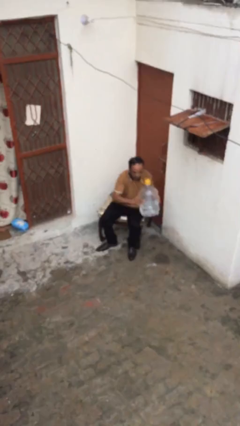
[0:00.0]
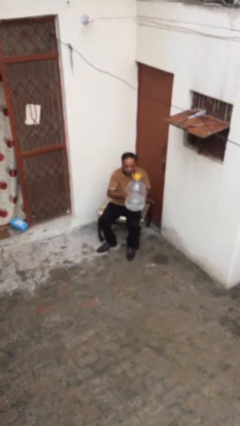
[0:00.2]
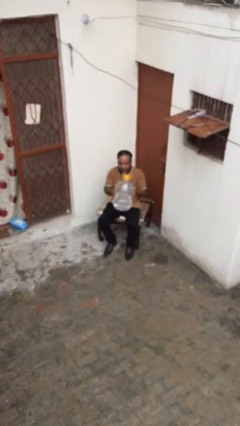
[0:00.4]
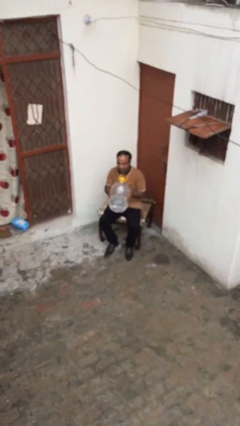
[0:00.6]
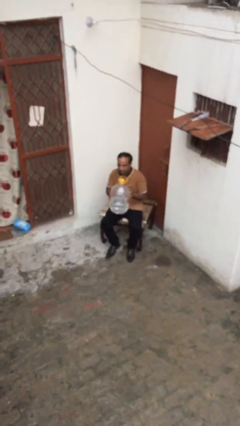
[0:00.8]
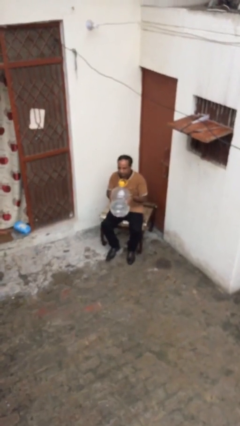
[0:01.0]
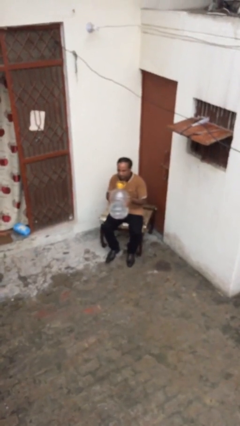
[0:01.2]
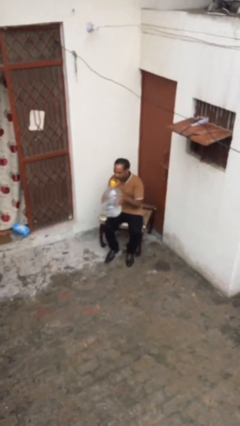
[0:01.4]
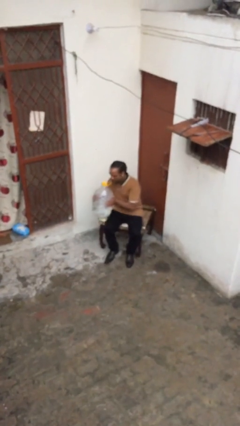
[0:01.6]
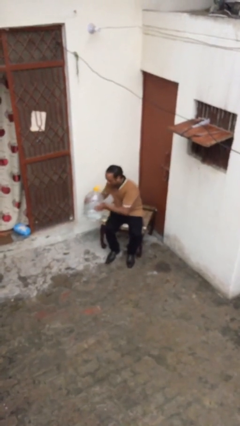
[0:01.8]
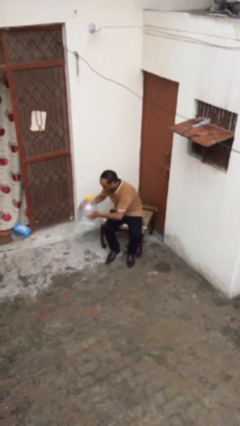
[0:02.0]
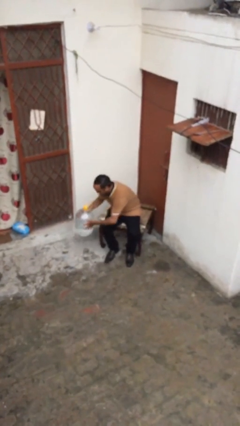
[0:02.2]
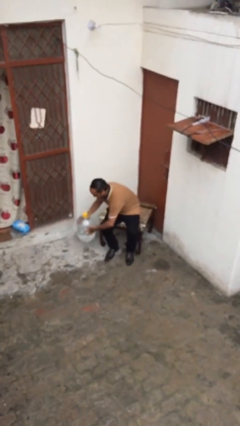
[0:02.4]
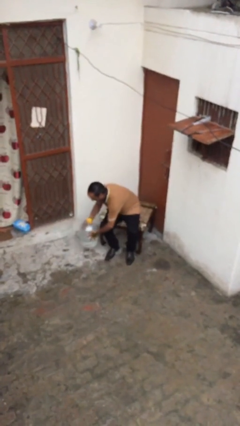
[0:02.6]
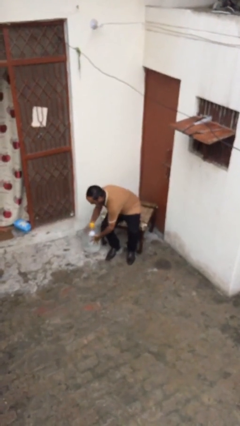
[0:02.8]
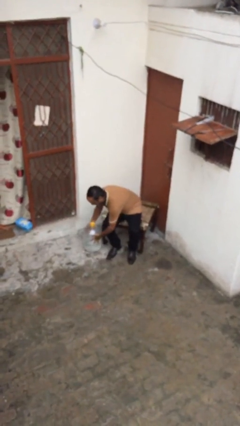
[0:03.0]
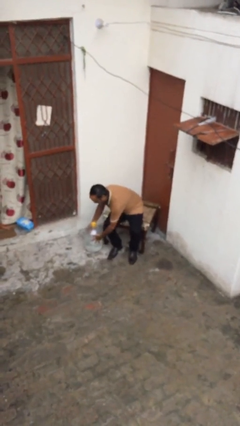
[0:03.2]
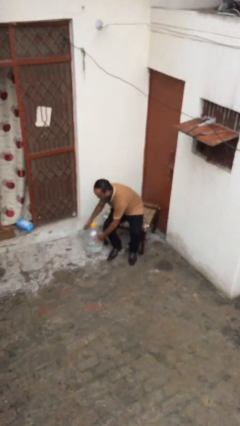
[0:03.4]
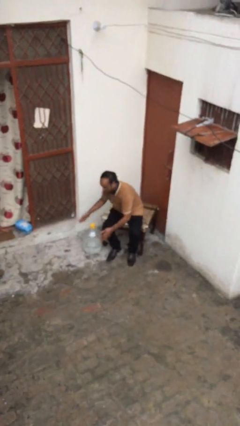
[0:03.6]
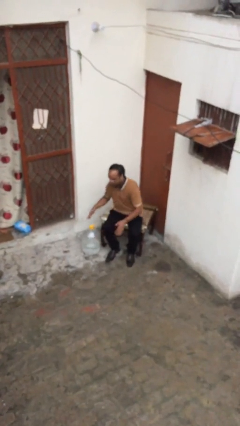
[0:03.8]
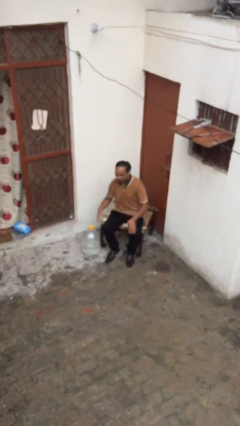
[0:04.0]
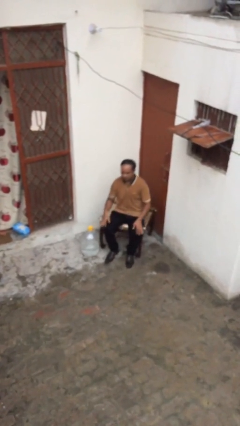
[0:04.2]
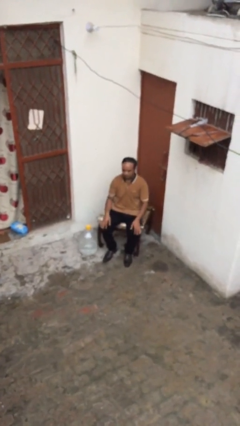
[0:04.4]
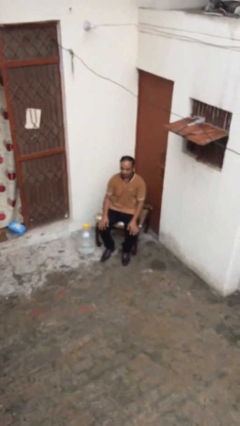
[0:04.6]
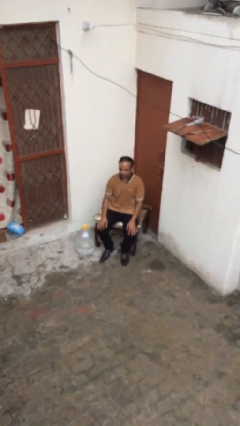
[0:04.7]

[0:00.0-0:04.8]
person puts down object on floor

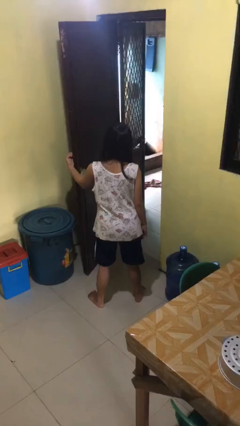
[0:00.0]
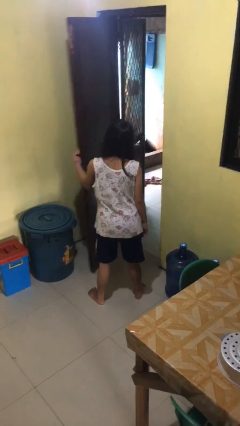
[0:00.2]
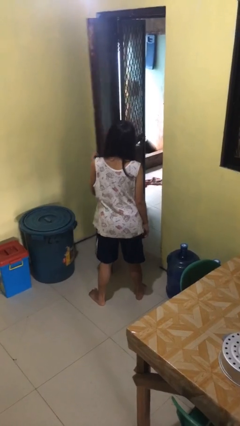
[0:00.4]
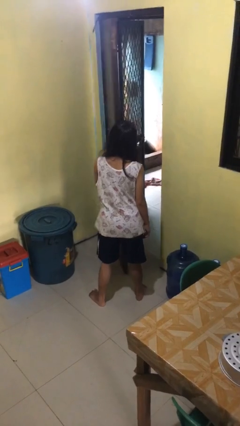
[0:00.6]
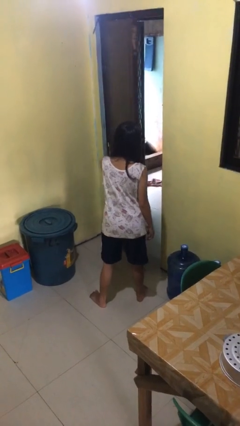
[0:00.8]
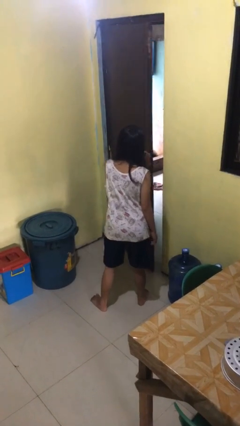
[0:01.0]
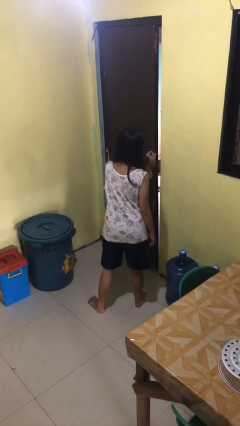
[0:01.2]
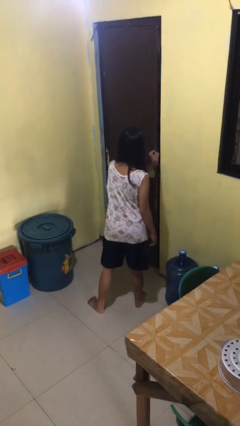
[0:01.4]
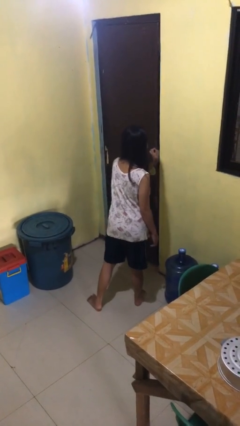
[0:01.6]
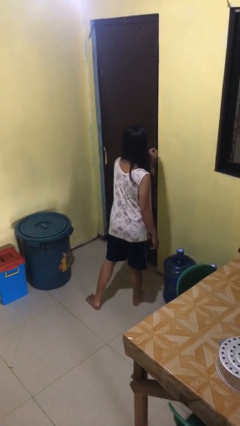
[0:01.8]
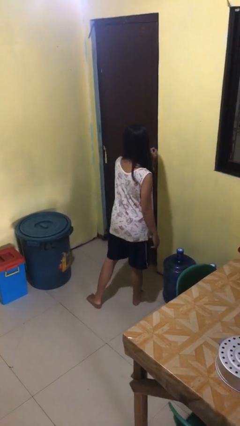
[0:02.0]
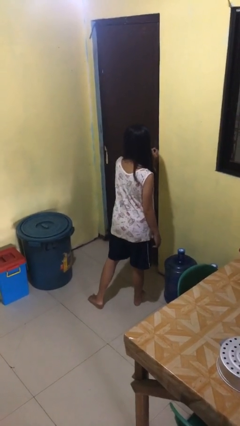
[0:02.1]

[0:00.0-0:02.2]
person closes facility door

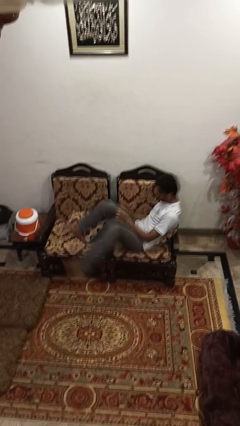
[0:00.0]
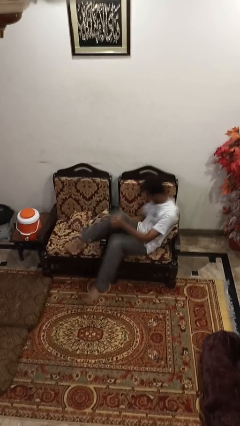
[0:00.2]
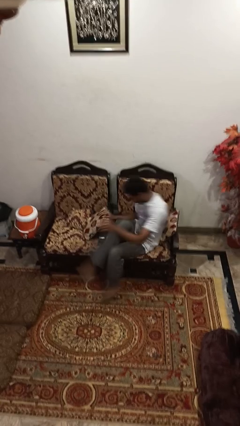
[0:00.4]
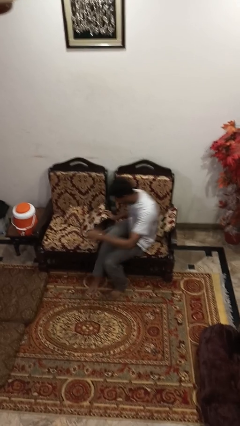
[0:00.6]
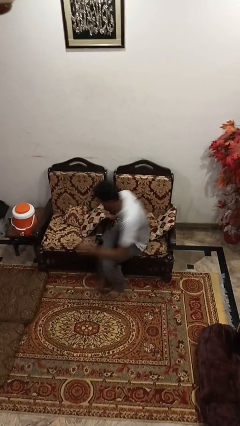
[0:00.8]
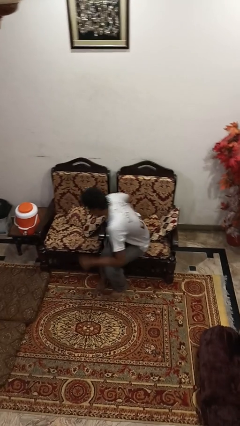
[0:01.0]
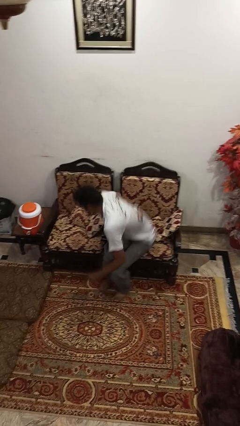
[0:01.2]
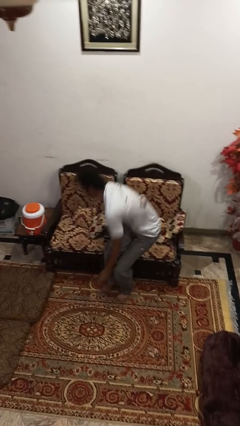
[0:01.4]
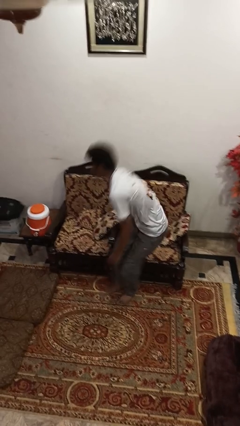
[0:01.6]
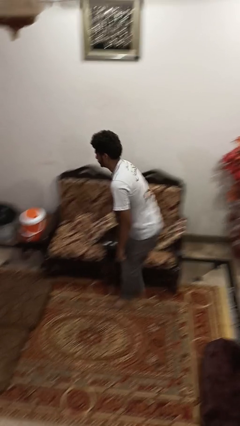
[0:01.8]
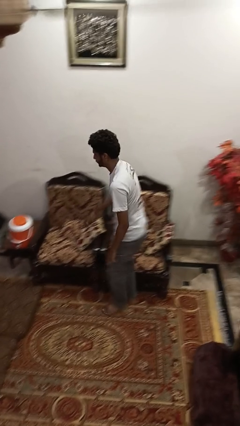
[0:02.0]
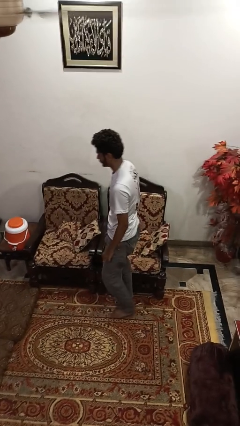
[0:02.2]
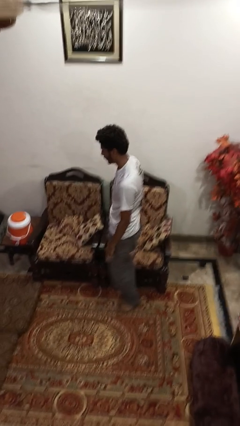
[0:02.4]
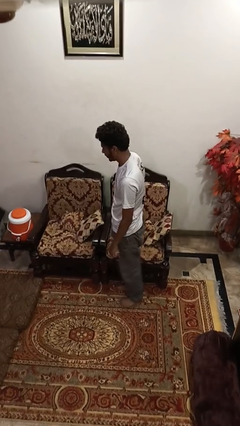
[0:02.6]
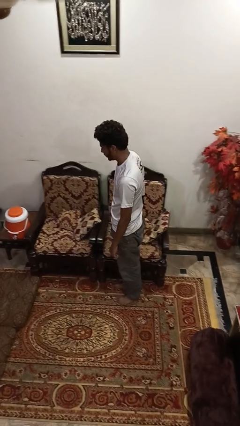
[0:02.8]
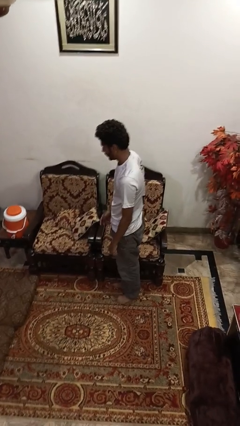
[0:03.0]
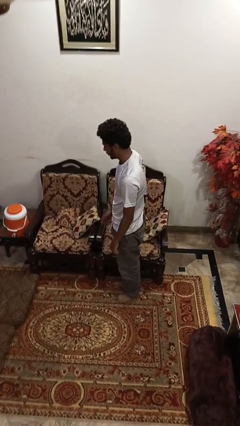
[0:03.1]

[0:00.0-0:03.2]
person stands up

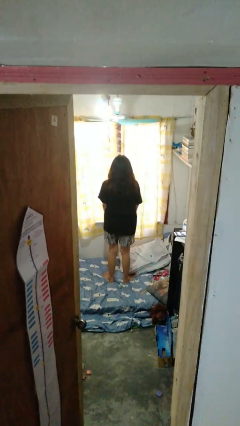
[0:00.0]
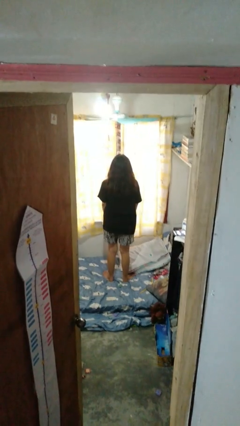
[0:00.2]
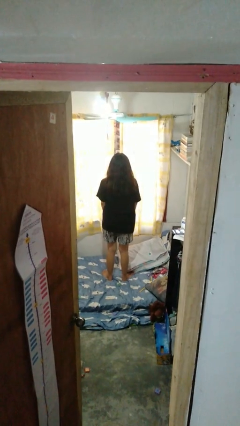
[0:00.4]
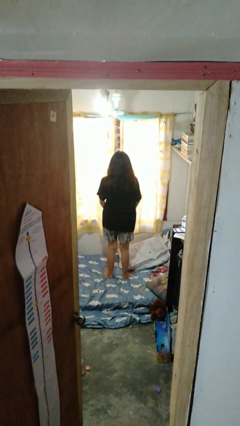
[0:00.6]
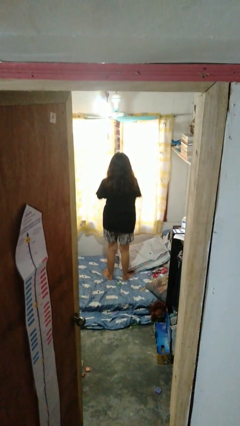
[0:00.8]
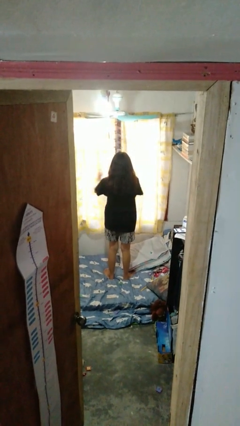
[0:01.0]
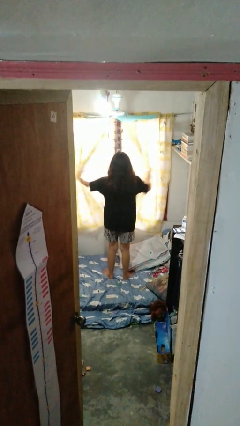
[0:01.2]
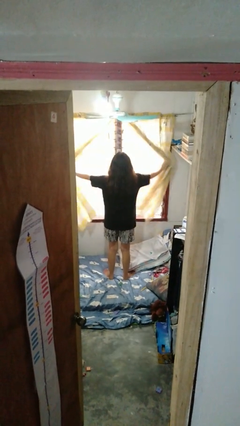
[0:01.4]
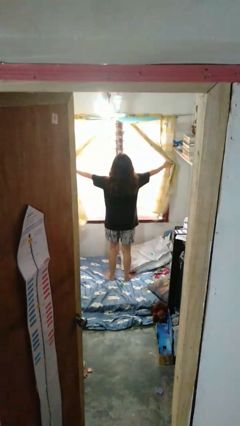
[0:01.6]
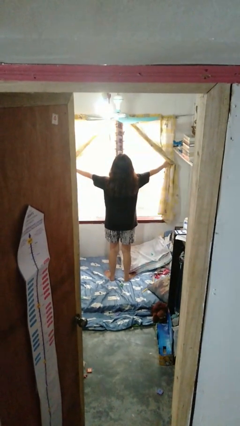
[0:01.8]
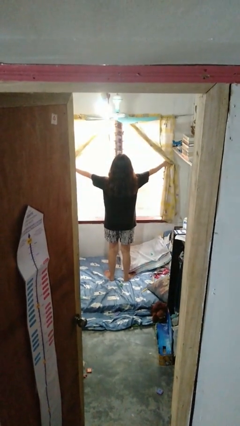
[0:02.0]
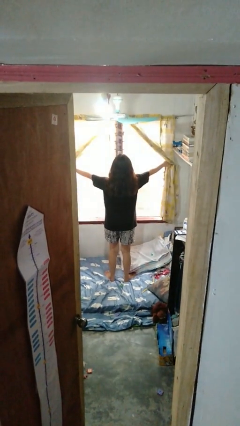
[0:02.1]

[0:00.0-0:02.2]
person opens curtains

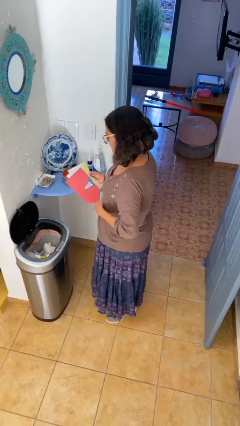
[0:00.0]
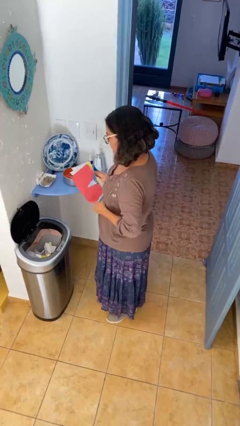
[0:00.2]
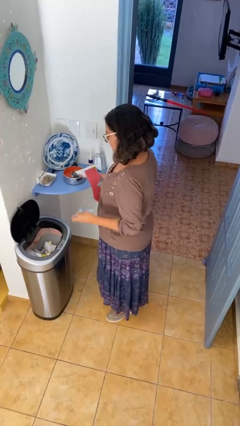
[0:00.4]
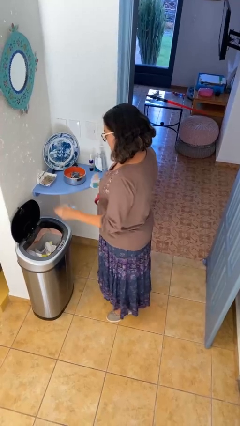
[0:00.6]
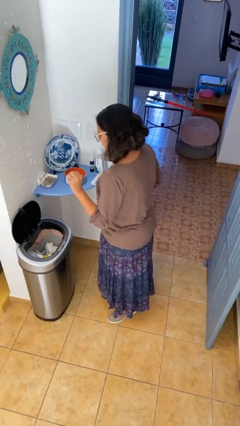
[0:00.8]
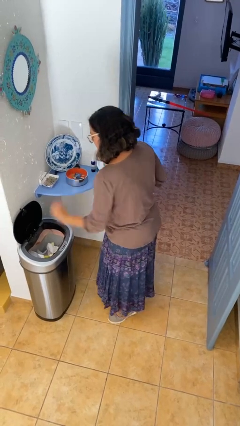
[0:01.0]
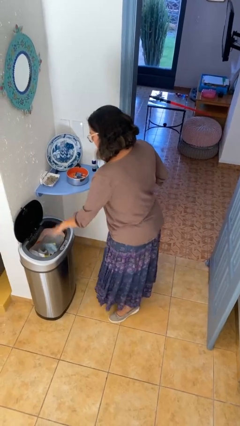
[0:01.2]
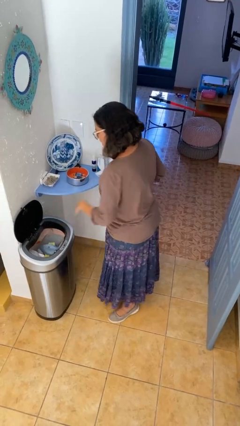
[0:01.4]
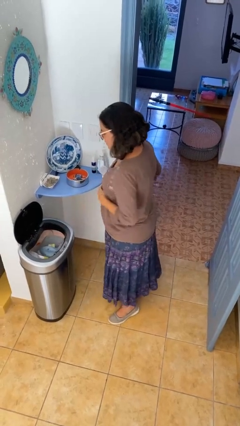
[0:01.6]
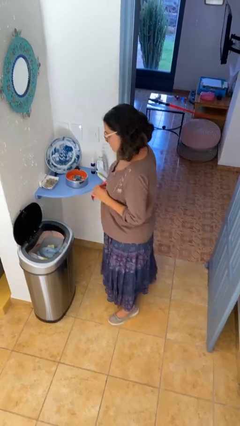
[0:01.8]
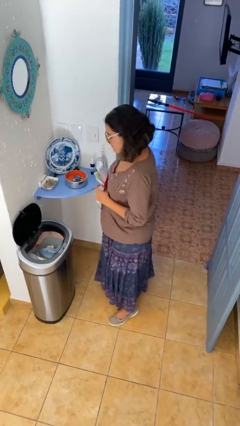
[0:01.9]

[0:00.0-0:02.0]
person discards trash

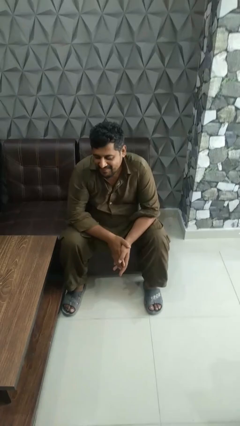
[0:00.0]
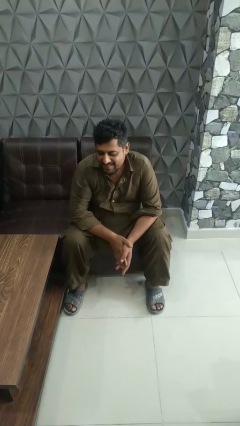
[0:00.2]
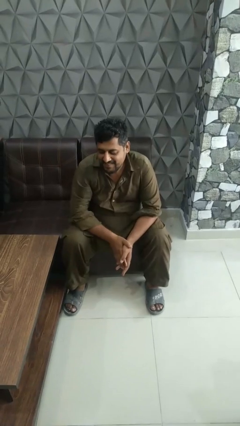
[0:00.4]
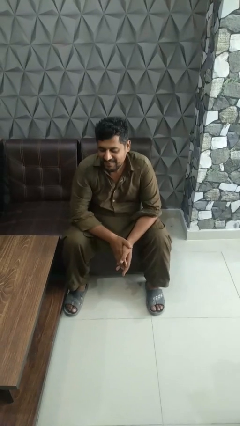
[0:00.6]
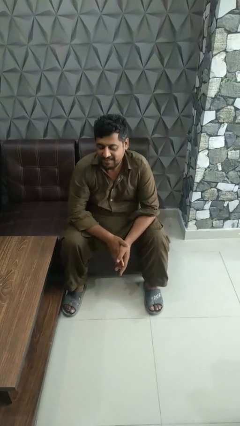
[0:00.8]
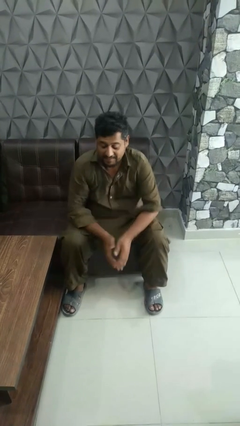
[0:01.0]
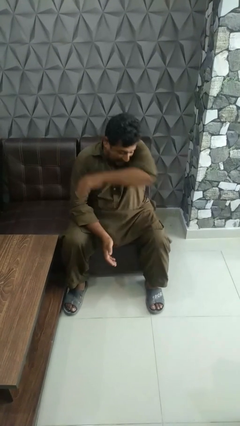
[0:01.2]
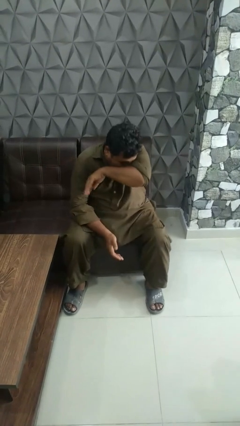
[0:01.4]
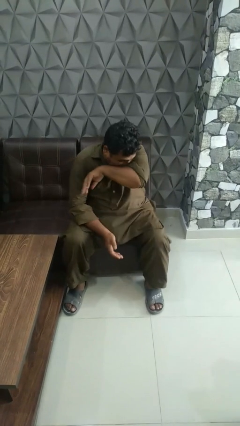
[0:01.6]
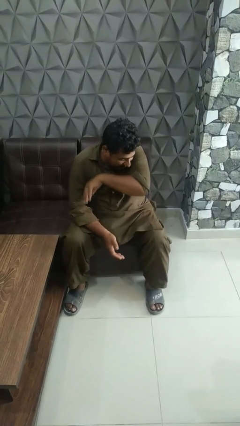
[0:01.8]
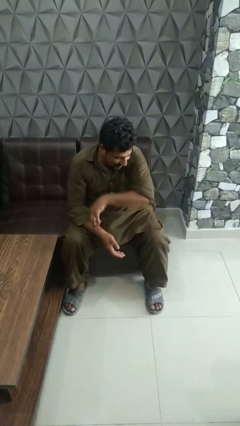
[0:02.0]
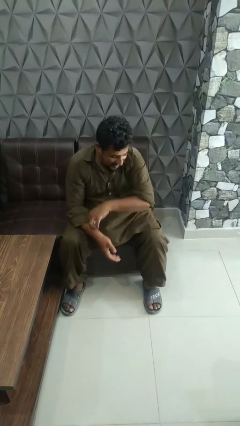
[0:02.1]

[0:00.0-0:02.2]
person sneezes into arm

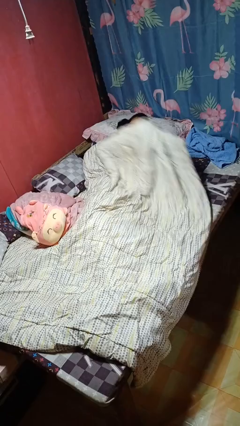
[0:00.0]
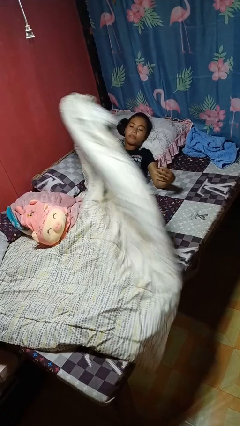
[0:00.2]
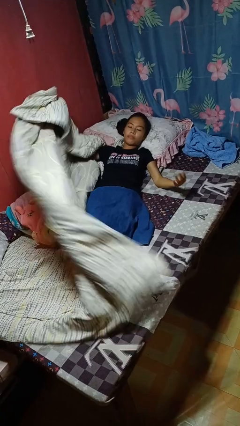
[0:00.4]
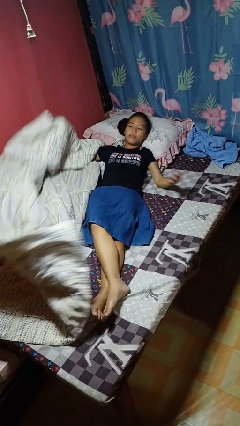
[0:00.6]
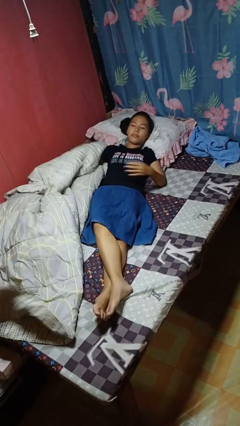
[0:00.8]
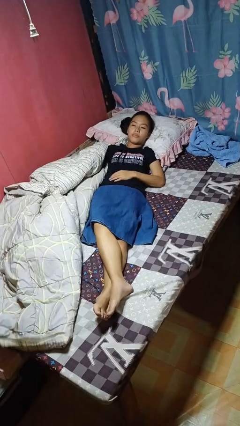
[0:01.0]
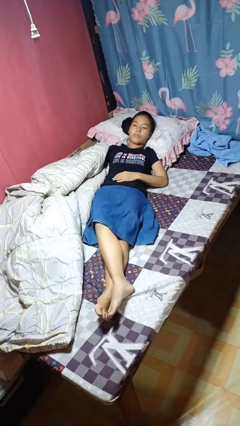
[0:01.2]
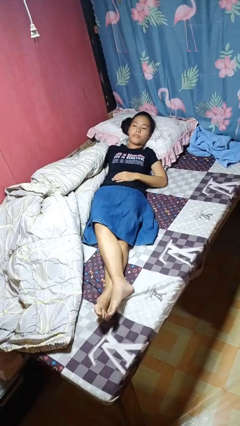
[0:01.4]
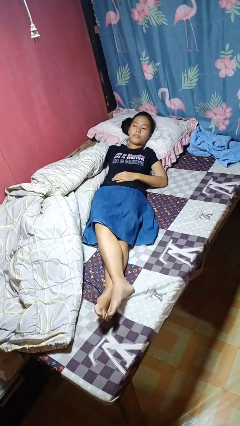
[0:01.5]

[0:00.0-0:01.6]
person uncovers with bedsheets
